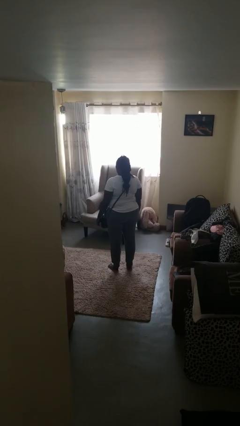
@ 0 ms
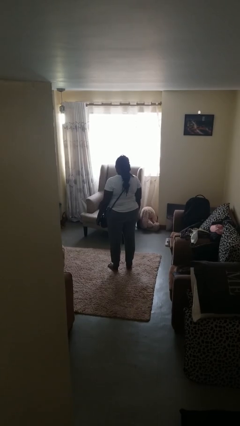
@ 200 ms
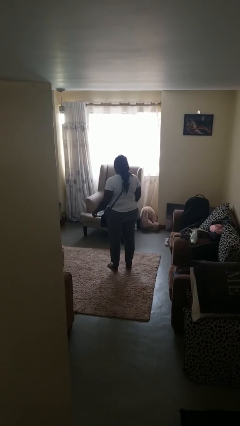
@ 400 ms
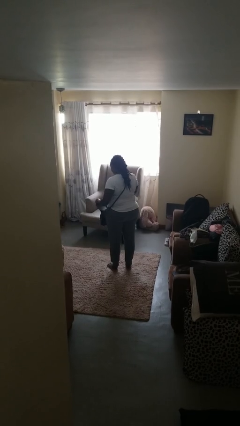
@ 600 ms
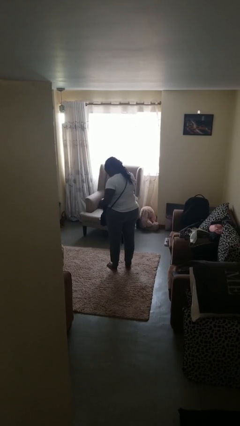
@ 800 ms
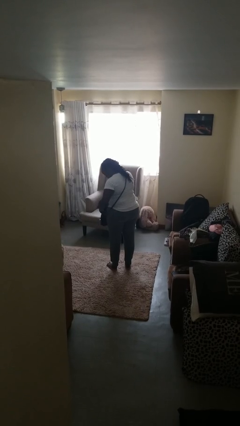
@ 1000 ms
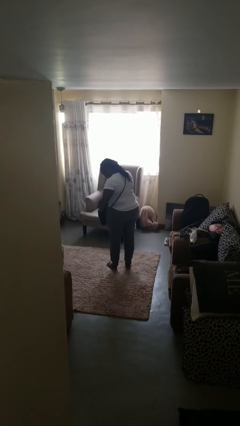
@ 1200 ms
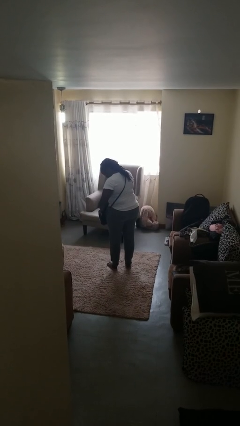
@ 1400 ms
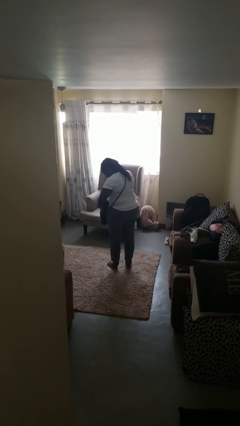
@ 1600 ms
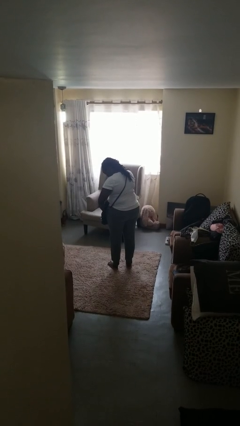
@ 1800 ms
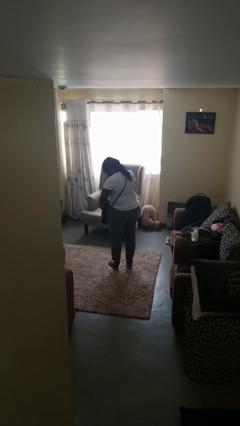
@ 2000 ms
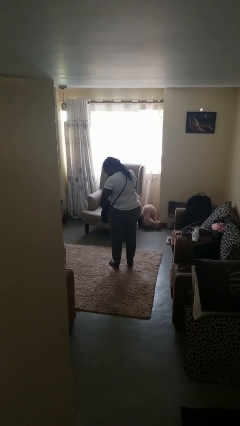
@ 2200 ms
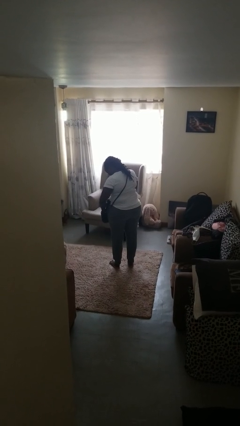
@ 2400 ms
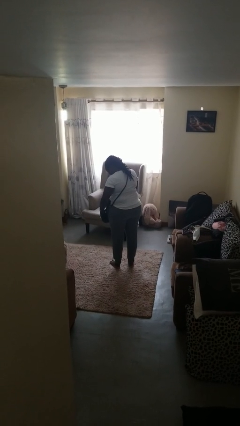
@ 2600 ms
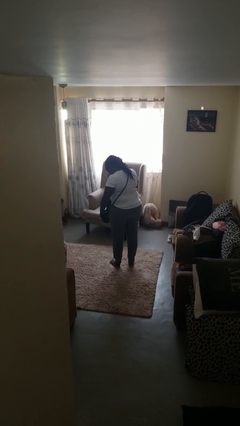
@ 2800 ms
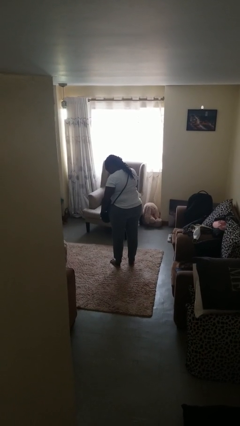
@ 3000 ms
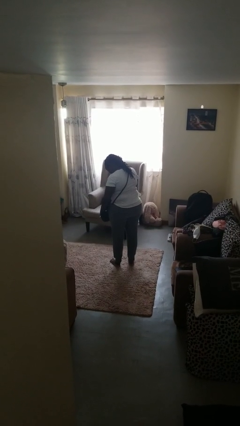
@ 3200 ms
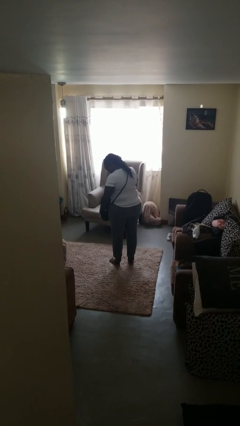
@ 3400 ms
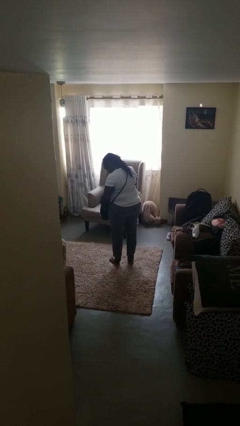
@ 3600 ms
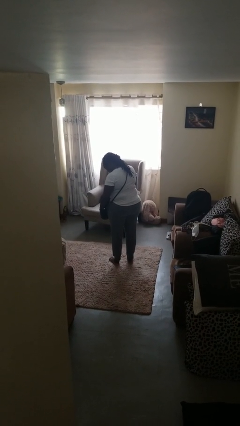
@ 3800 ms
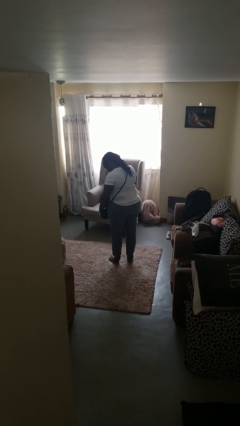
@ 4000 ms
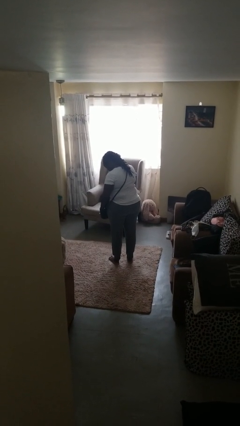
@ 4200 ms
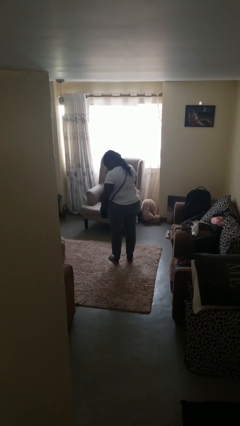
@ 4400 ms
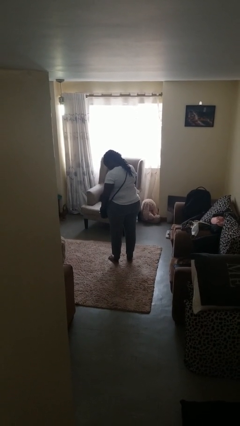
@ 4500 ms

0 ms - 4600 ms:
person searches in purse

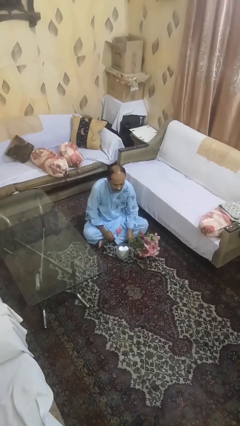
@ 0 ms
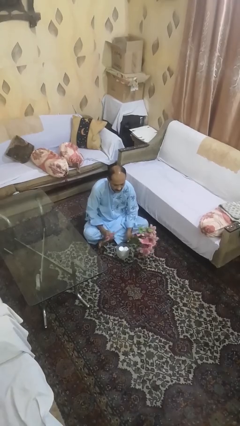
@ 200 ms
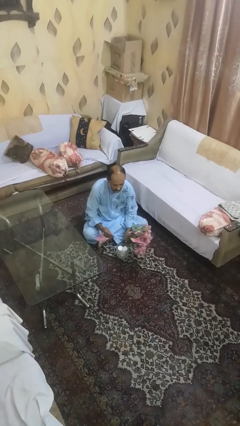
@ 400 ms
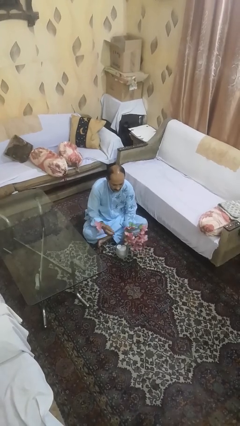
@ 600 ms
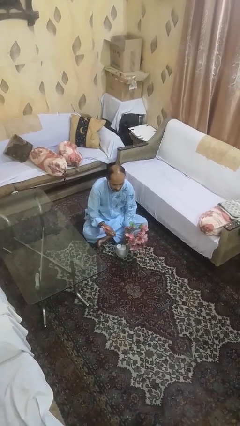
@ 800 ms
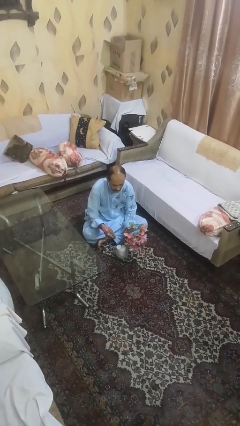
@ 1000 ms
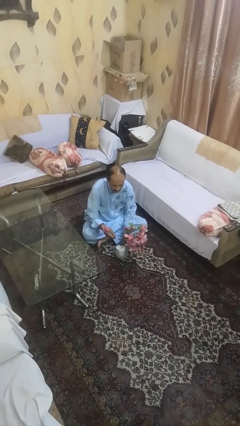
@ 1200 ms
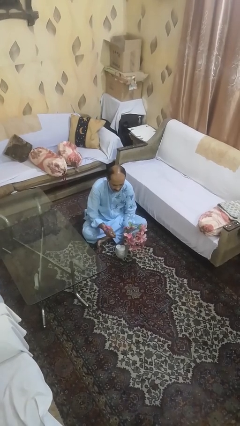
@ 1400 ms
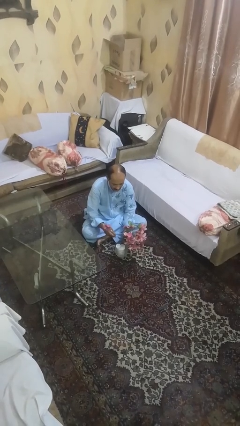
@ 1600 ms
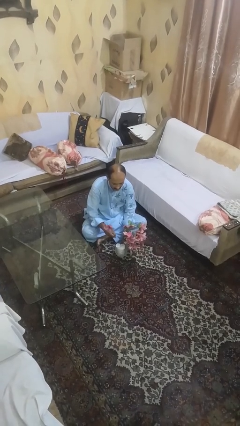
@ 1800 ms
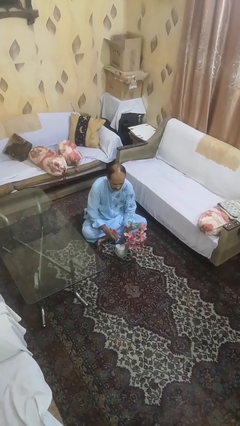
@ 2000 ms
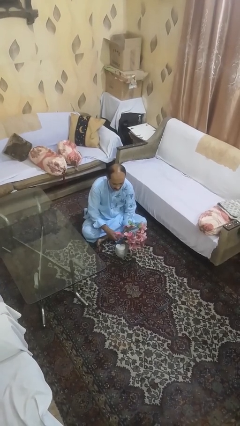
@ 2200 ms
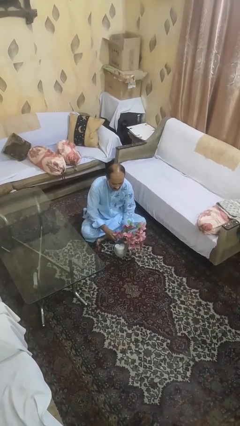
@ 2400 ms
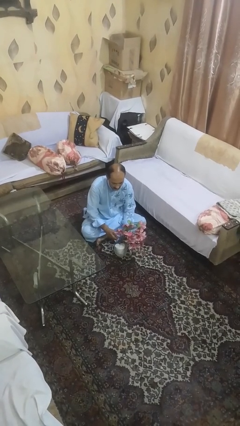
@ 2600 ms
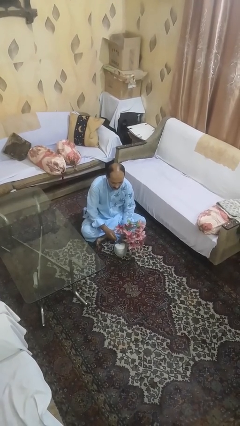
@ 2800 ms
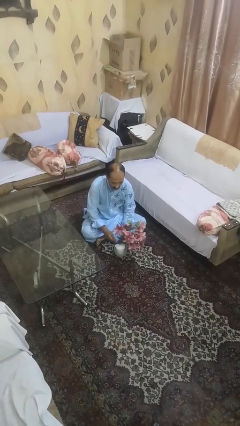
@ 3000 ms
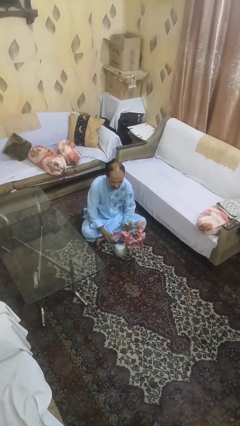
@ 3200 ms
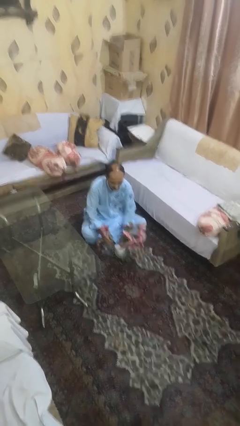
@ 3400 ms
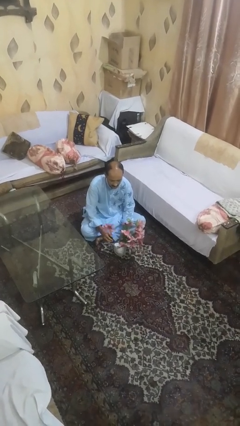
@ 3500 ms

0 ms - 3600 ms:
person arranges flowers in vase

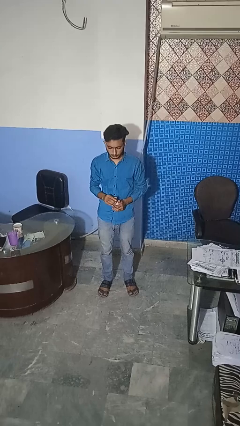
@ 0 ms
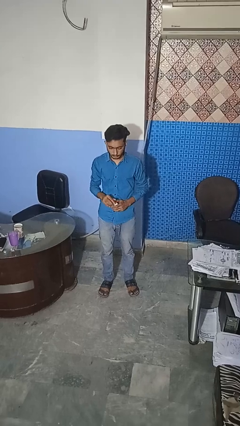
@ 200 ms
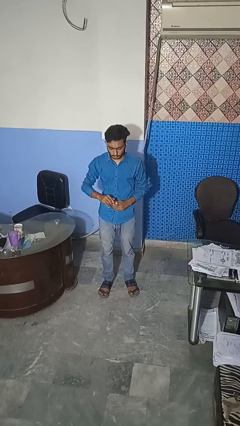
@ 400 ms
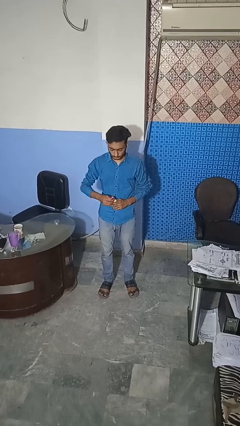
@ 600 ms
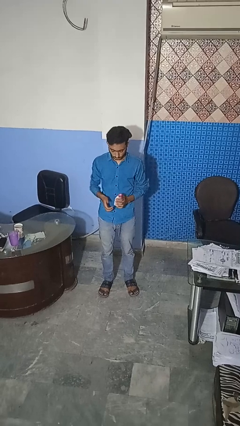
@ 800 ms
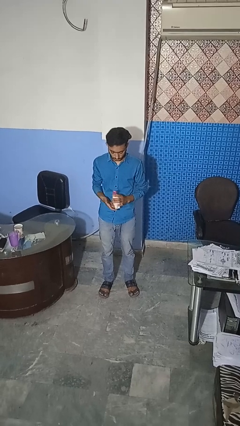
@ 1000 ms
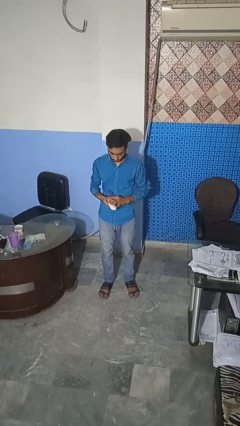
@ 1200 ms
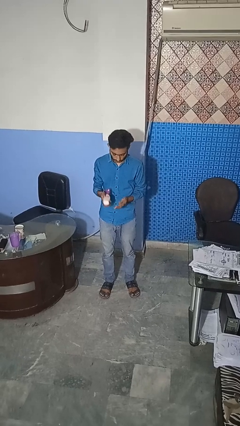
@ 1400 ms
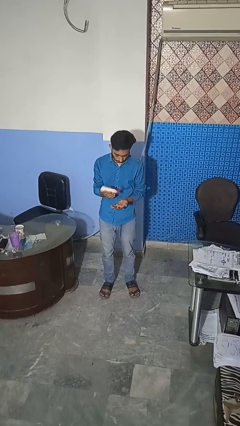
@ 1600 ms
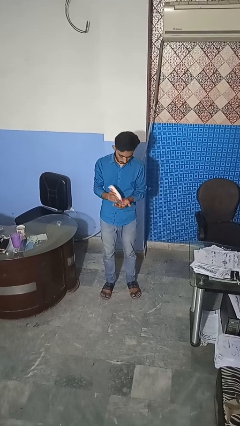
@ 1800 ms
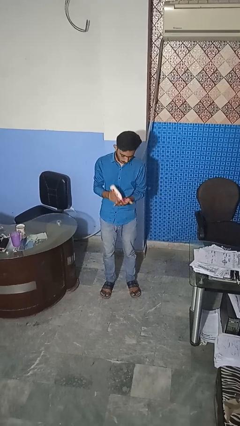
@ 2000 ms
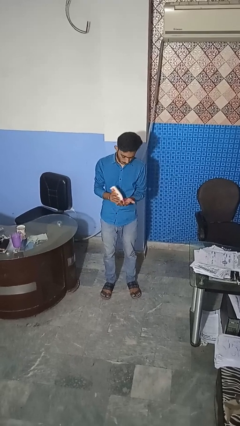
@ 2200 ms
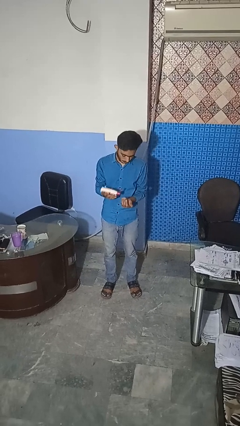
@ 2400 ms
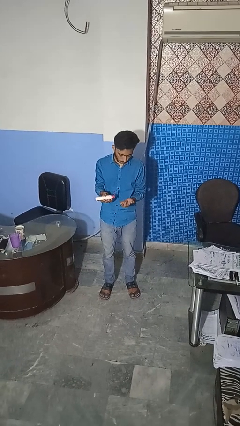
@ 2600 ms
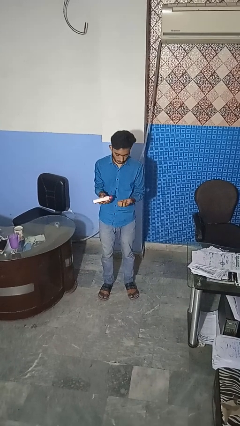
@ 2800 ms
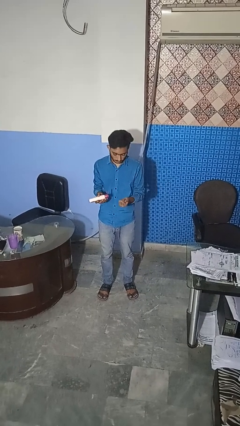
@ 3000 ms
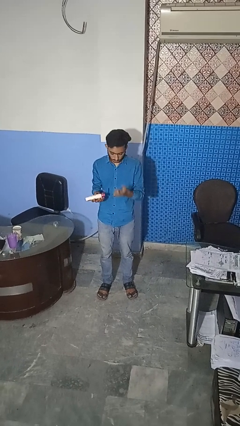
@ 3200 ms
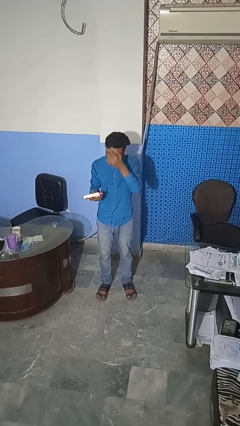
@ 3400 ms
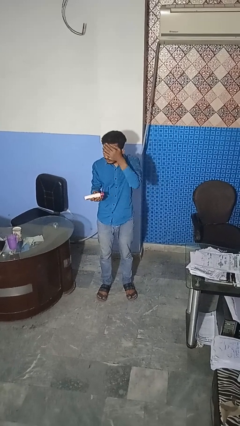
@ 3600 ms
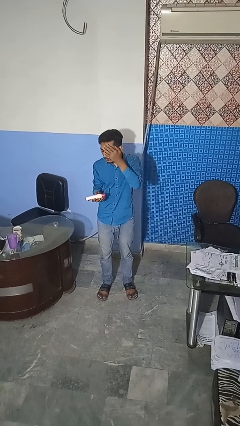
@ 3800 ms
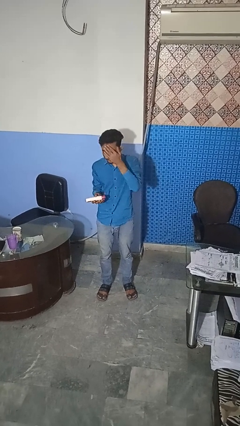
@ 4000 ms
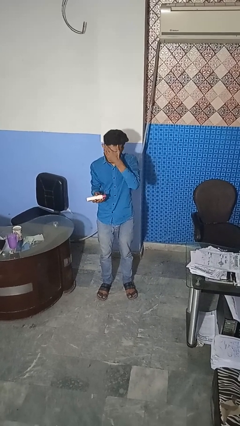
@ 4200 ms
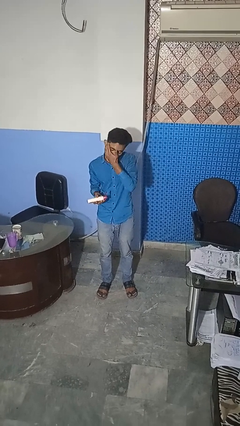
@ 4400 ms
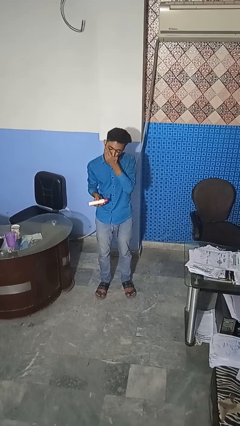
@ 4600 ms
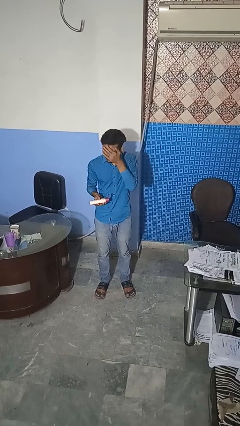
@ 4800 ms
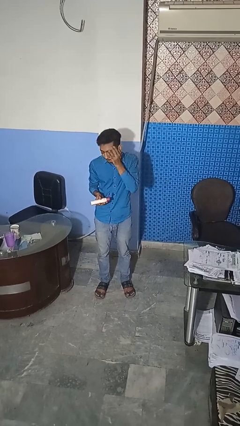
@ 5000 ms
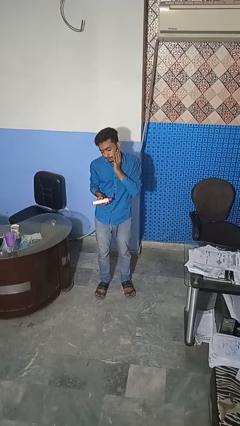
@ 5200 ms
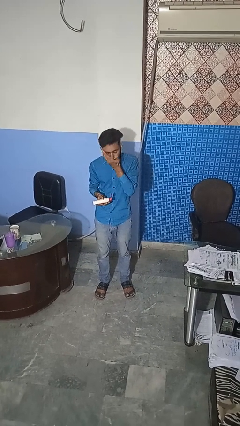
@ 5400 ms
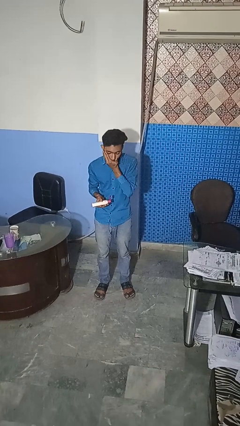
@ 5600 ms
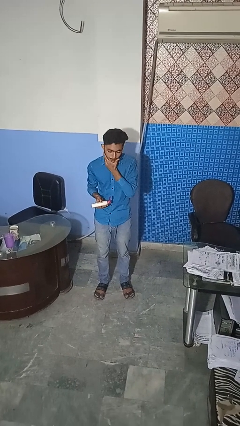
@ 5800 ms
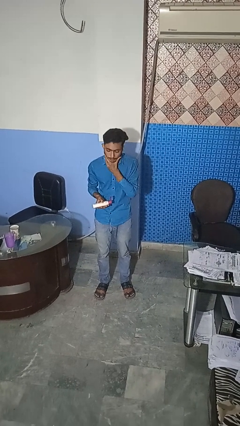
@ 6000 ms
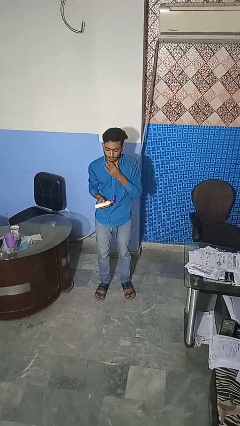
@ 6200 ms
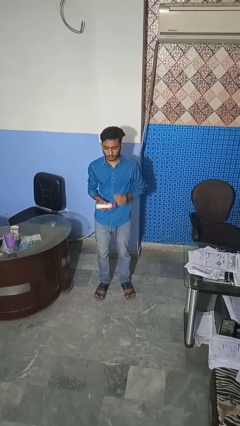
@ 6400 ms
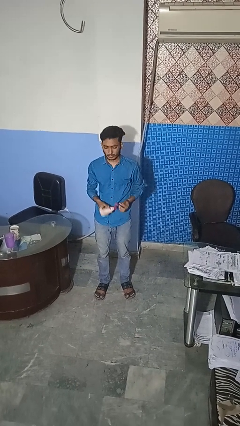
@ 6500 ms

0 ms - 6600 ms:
person applies facial moisturizer

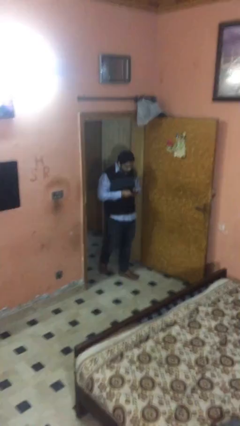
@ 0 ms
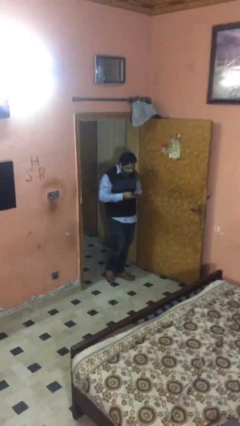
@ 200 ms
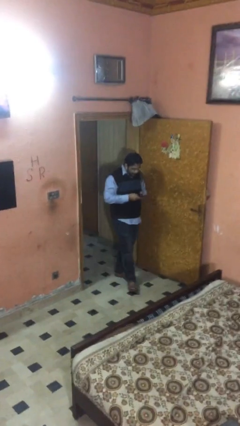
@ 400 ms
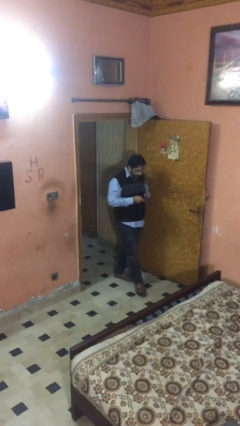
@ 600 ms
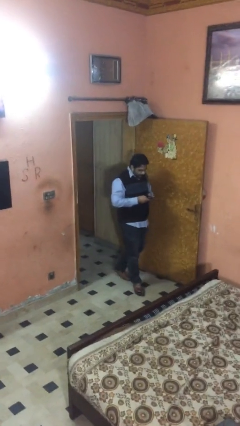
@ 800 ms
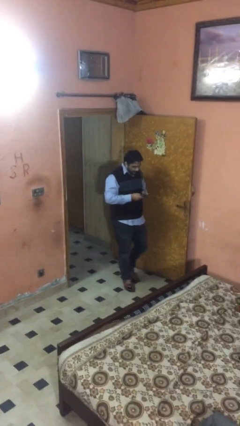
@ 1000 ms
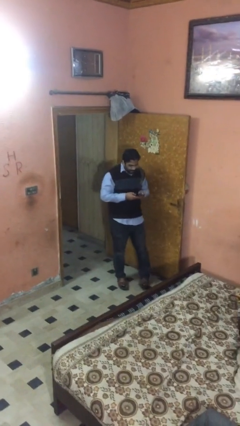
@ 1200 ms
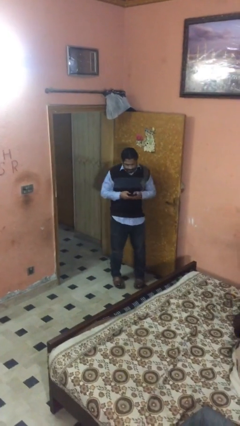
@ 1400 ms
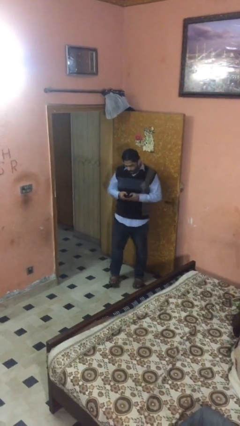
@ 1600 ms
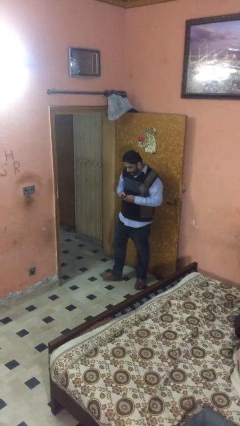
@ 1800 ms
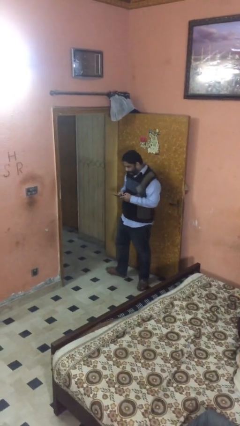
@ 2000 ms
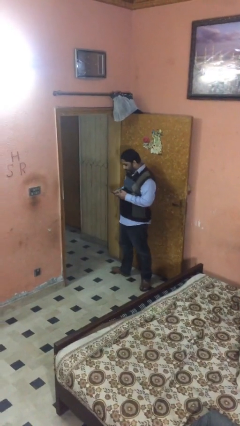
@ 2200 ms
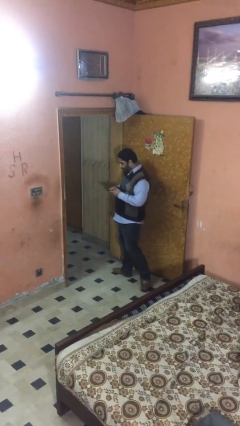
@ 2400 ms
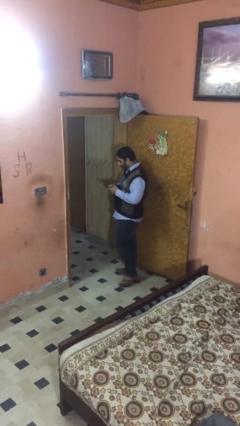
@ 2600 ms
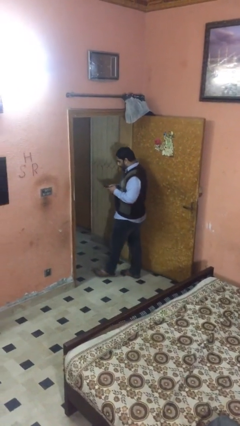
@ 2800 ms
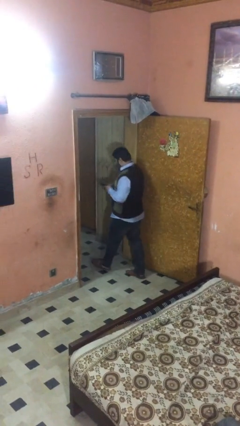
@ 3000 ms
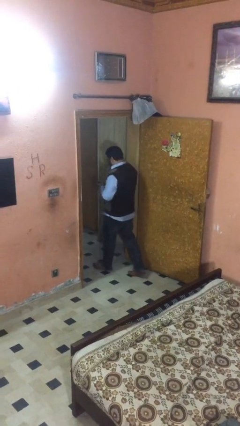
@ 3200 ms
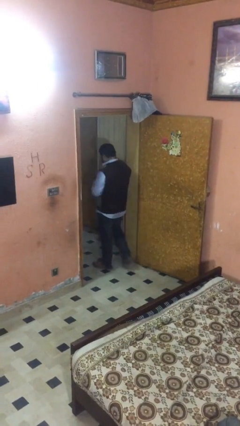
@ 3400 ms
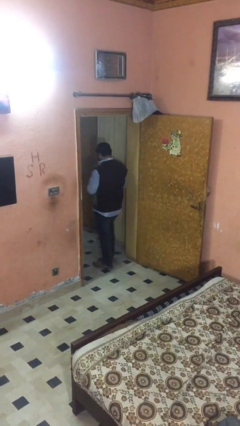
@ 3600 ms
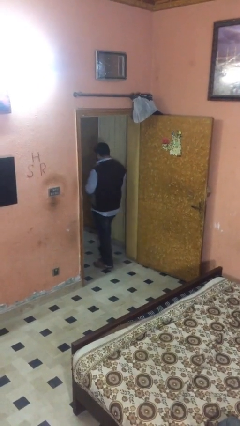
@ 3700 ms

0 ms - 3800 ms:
person exits scene through structure
